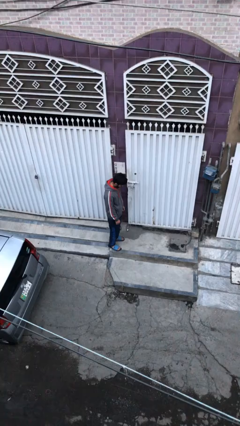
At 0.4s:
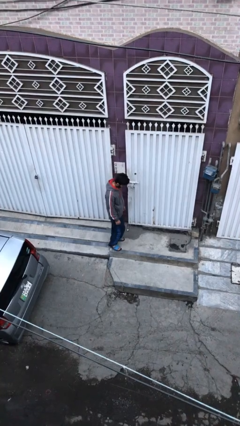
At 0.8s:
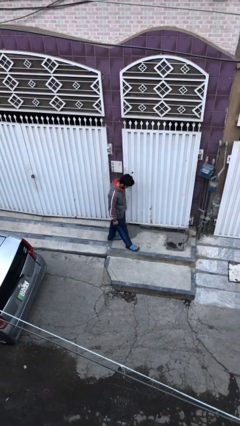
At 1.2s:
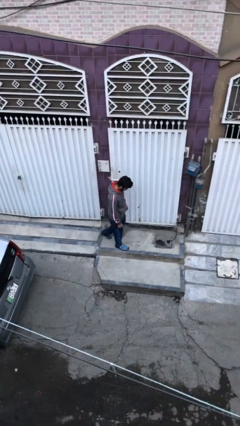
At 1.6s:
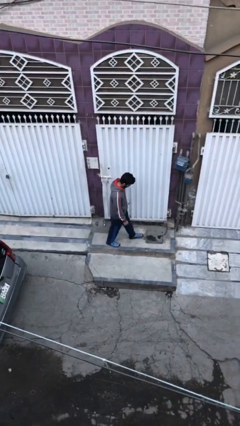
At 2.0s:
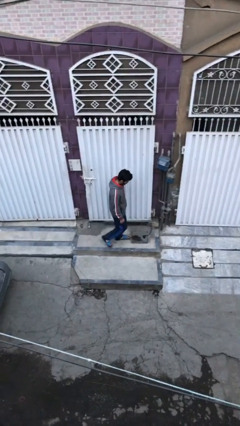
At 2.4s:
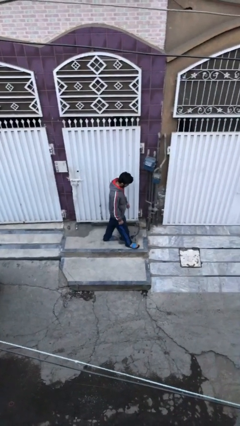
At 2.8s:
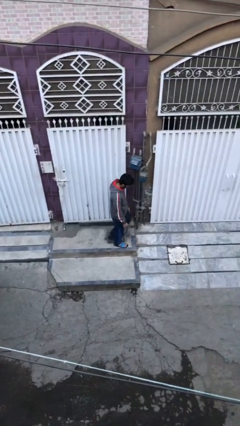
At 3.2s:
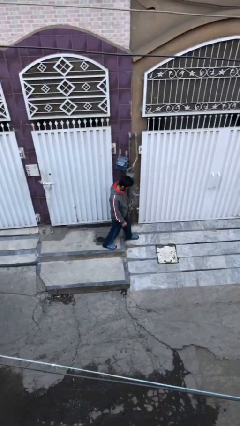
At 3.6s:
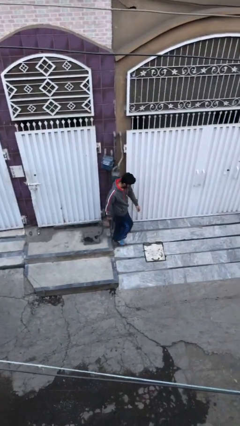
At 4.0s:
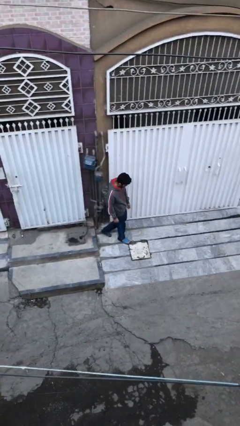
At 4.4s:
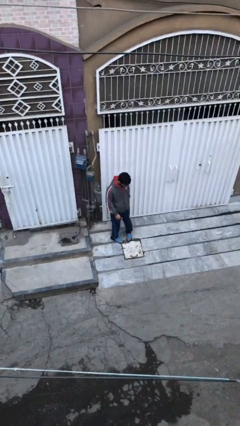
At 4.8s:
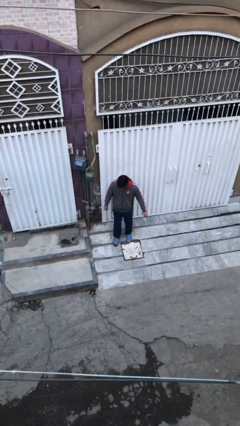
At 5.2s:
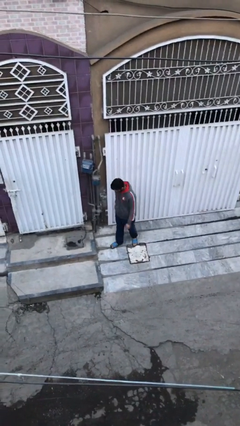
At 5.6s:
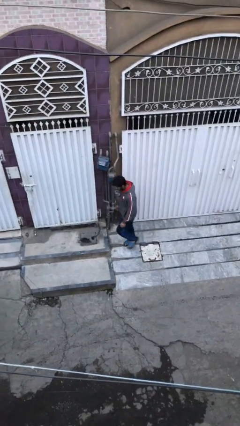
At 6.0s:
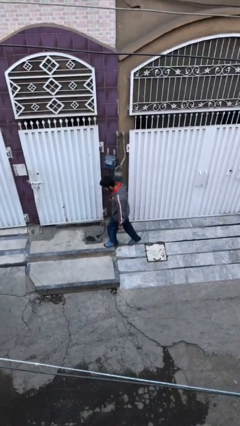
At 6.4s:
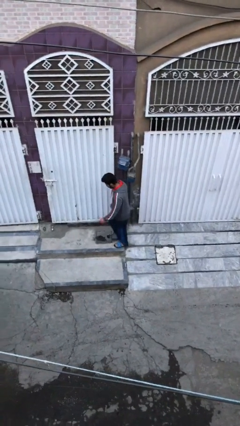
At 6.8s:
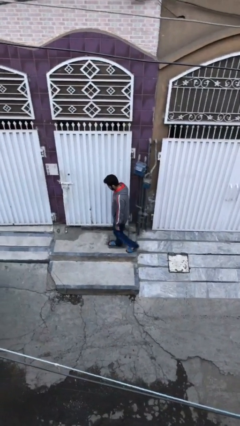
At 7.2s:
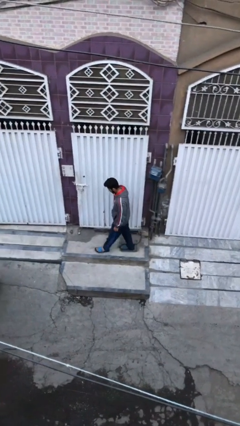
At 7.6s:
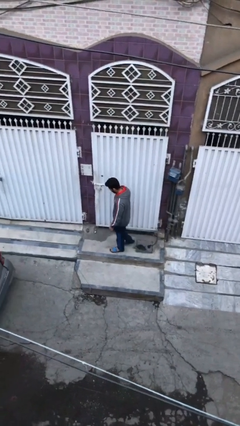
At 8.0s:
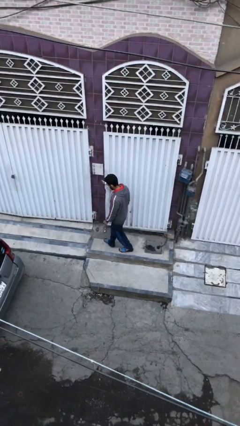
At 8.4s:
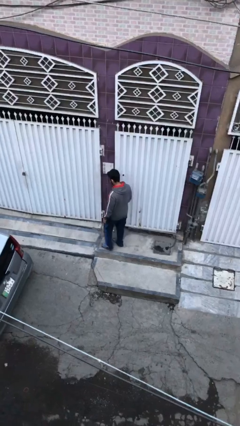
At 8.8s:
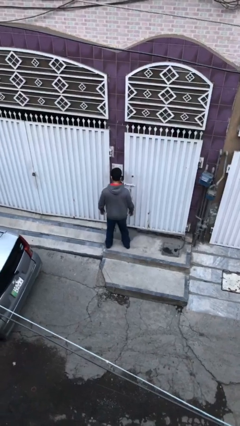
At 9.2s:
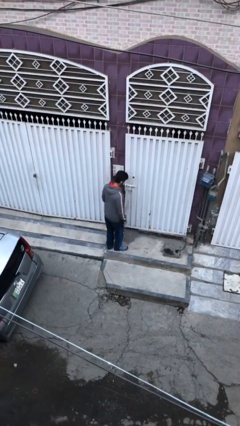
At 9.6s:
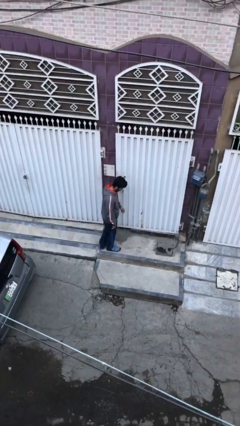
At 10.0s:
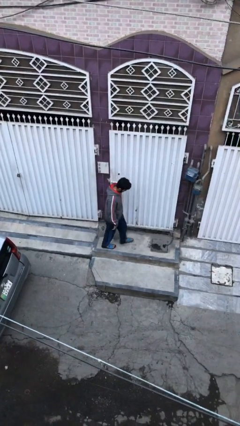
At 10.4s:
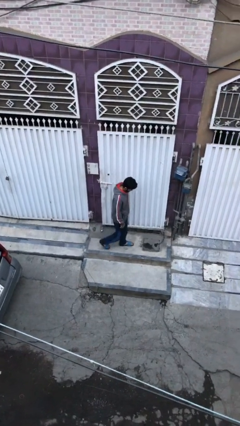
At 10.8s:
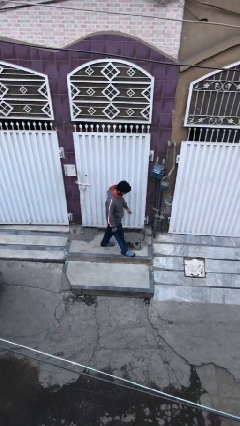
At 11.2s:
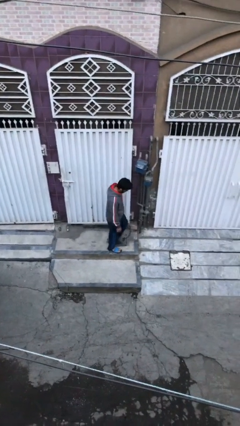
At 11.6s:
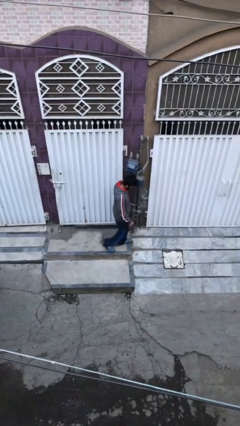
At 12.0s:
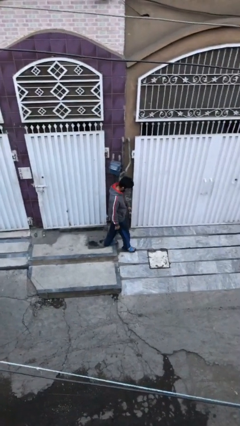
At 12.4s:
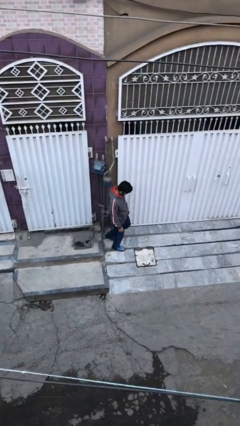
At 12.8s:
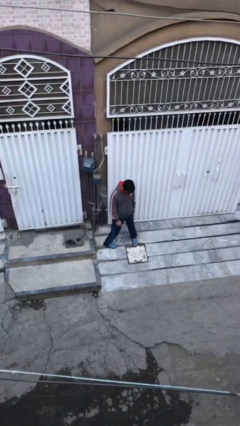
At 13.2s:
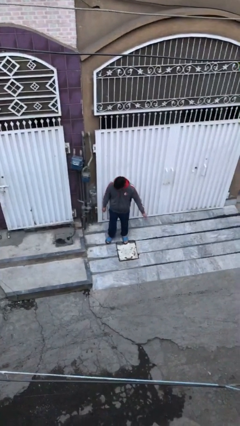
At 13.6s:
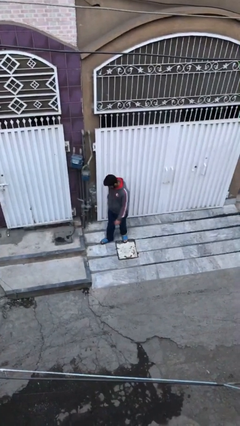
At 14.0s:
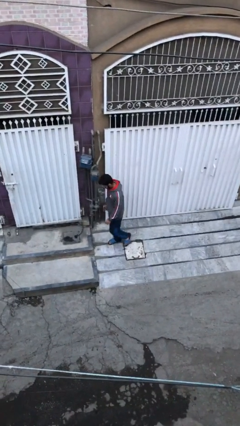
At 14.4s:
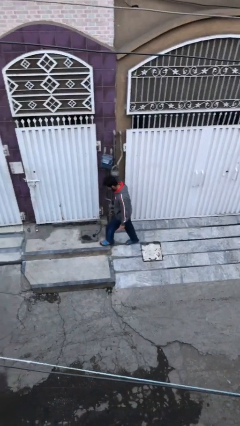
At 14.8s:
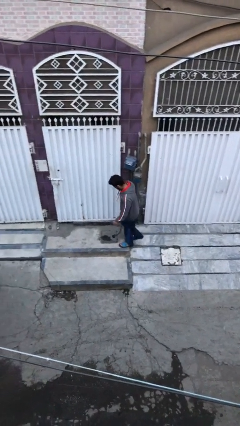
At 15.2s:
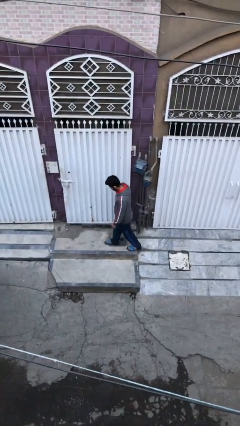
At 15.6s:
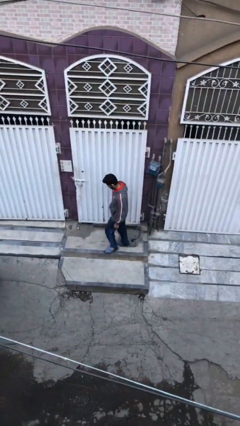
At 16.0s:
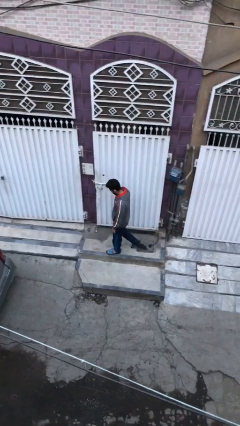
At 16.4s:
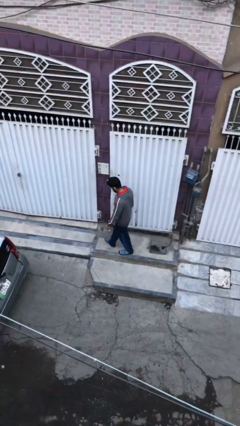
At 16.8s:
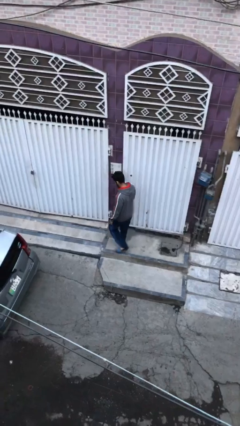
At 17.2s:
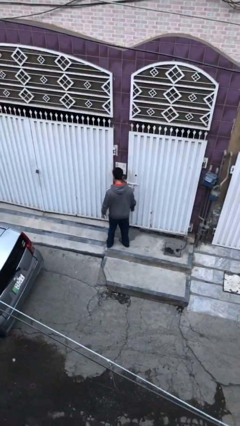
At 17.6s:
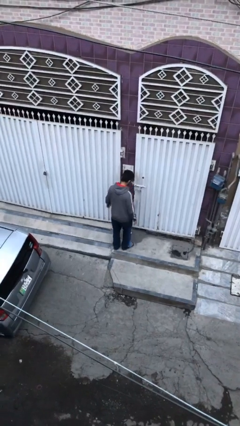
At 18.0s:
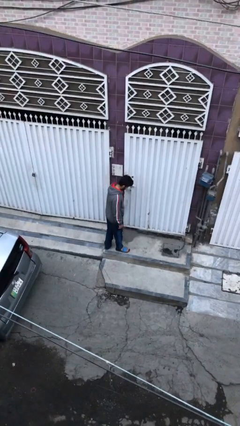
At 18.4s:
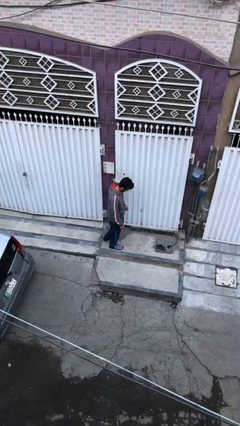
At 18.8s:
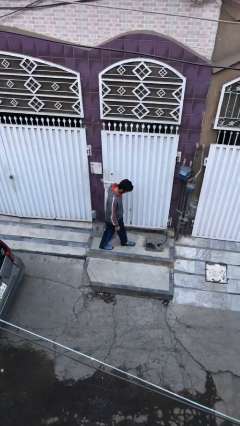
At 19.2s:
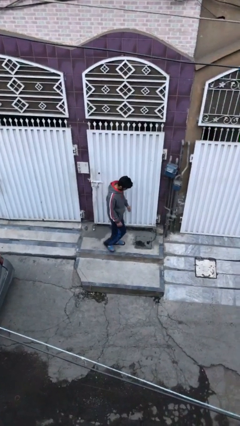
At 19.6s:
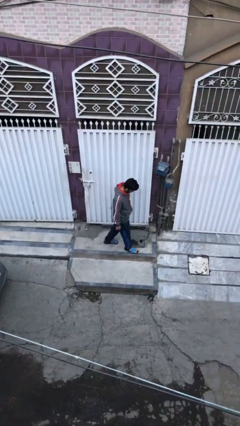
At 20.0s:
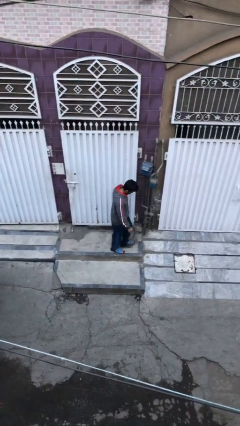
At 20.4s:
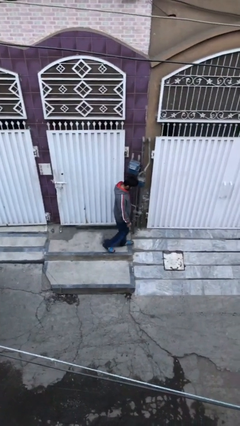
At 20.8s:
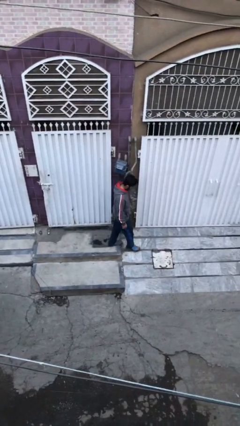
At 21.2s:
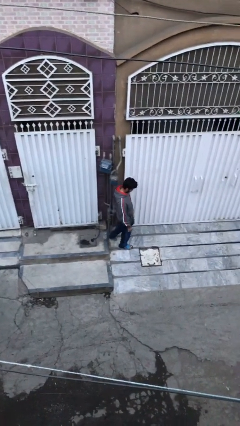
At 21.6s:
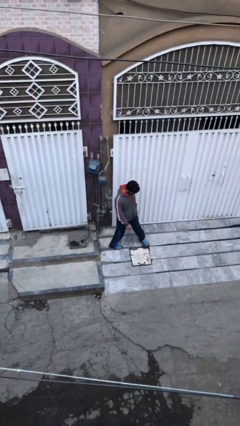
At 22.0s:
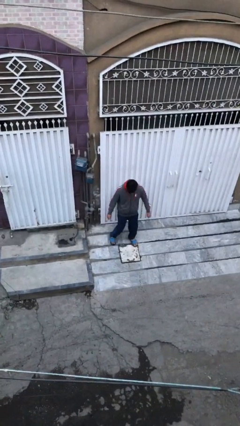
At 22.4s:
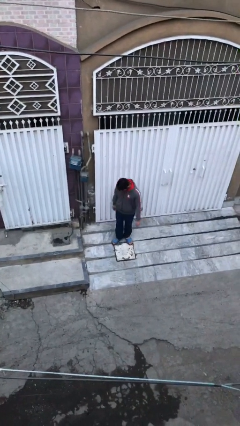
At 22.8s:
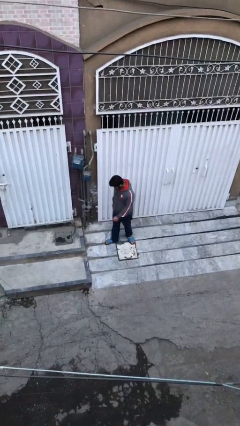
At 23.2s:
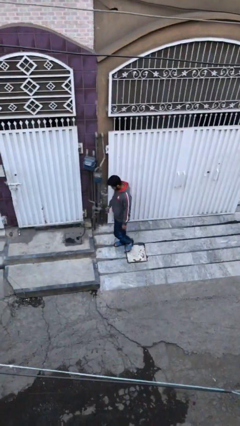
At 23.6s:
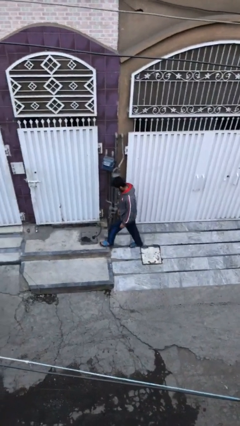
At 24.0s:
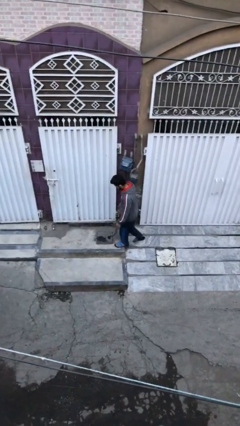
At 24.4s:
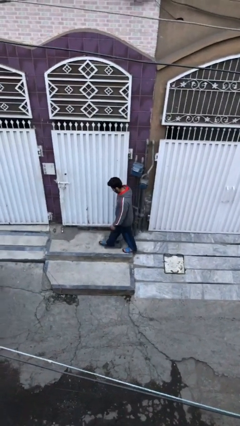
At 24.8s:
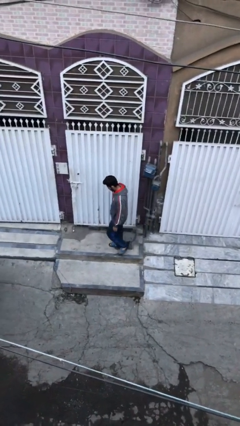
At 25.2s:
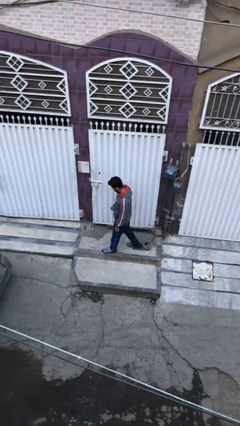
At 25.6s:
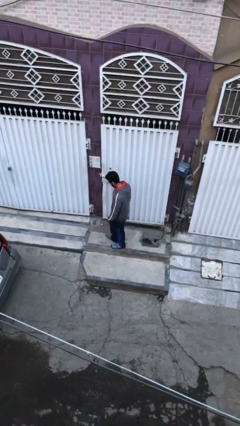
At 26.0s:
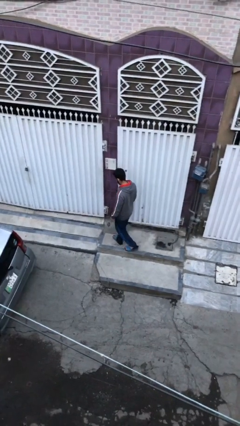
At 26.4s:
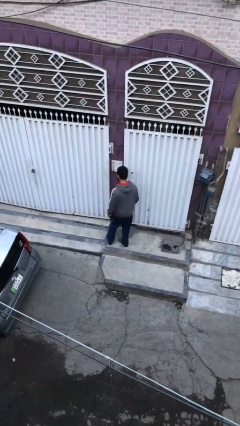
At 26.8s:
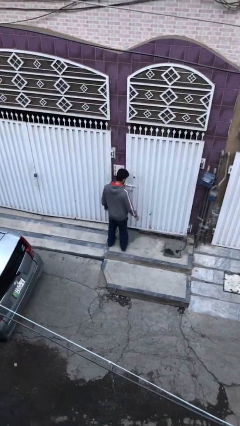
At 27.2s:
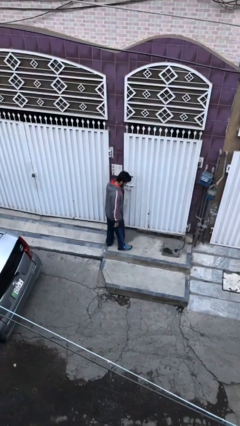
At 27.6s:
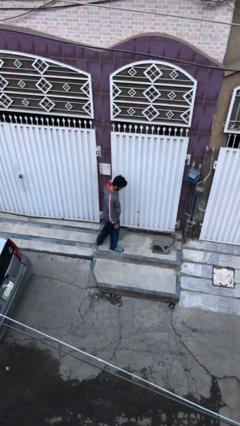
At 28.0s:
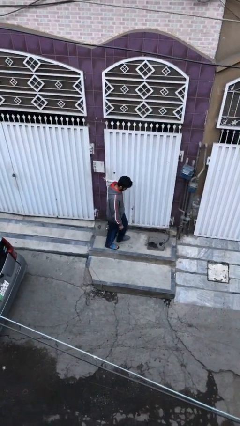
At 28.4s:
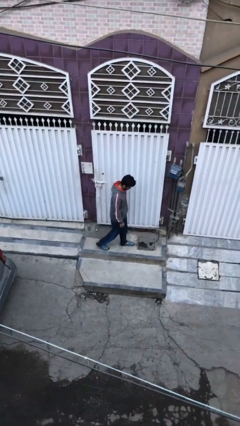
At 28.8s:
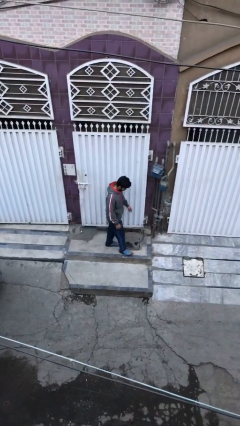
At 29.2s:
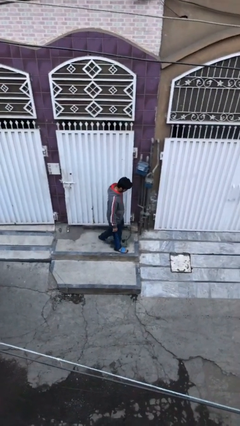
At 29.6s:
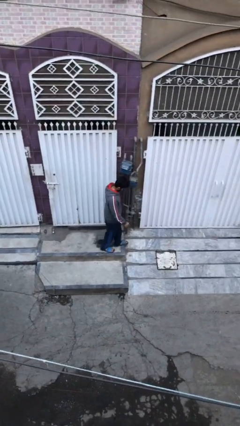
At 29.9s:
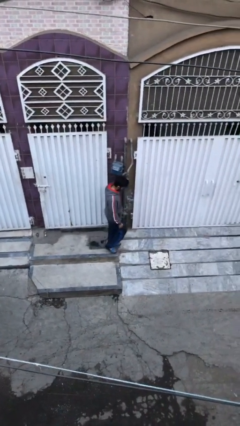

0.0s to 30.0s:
person walks

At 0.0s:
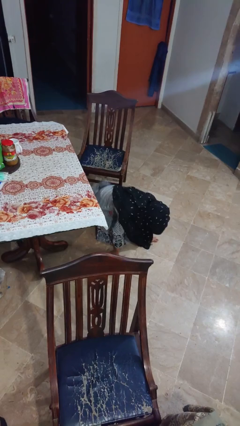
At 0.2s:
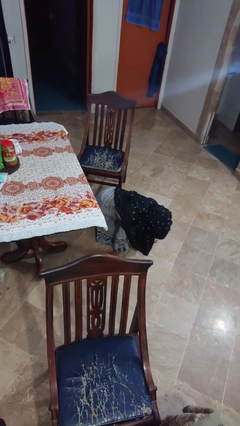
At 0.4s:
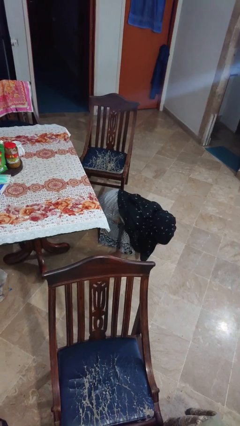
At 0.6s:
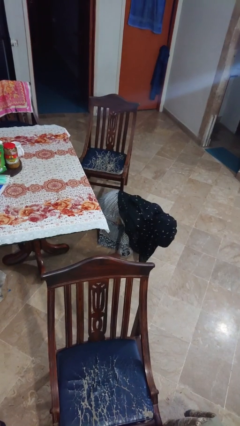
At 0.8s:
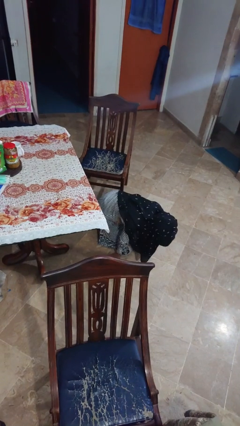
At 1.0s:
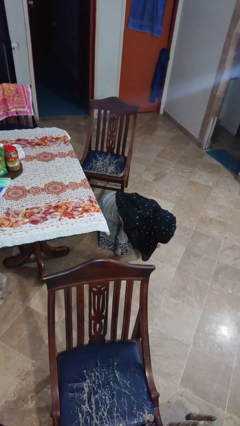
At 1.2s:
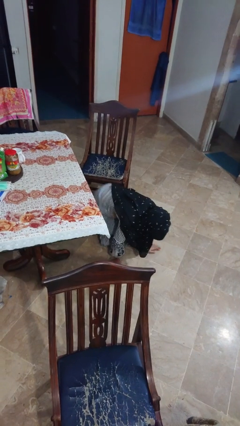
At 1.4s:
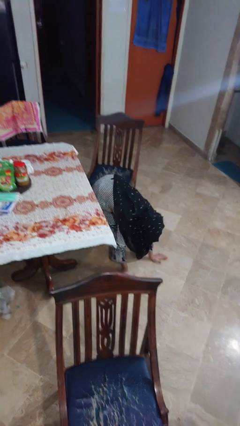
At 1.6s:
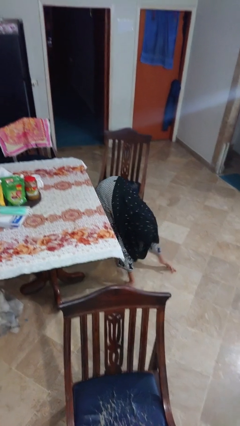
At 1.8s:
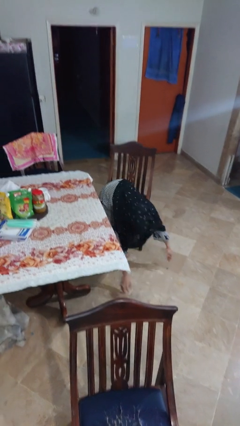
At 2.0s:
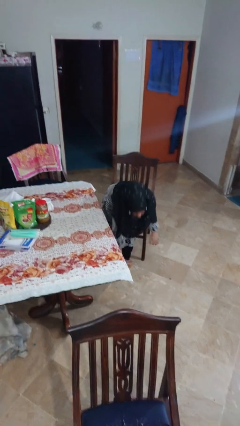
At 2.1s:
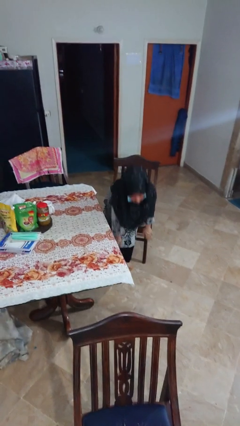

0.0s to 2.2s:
person stands up from floor

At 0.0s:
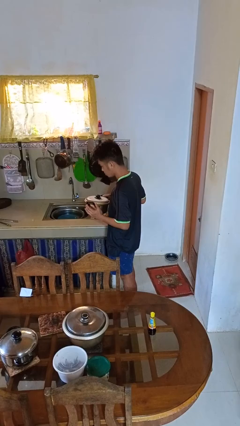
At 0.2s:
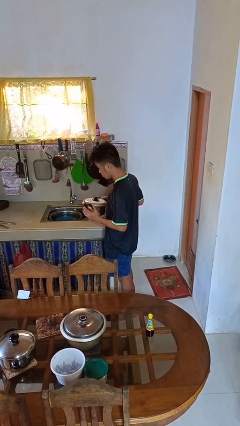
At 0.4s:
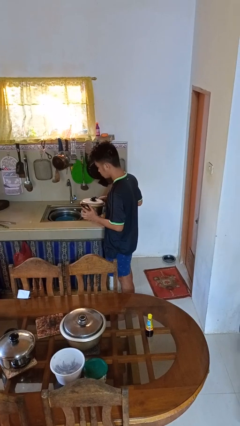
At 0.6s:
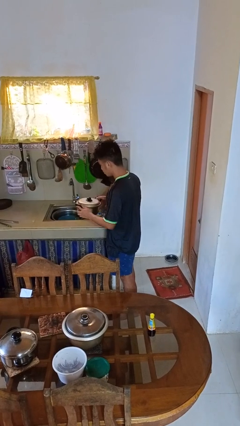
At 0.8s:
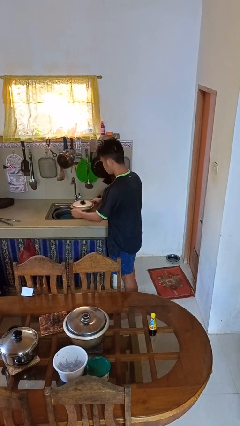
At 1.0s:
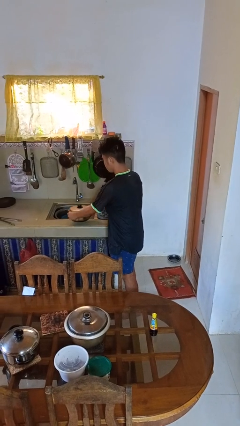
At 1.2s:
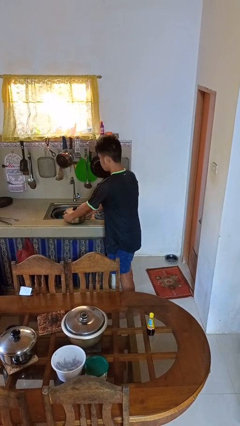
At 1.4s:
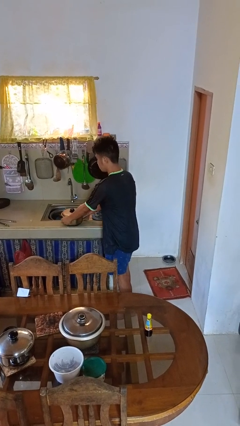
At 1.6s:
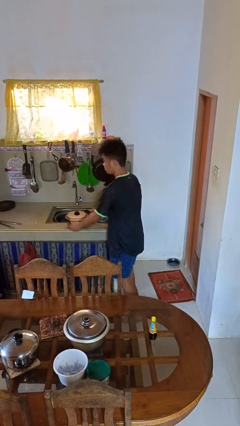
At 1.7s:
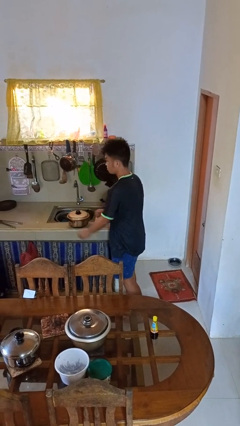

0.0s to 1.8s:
person puts down object on countertop
